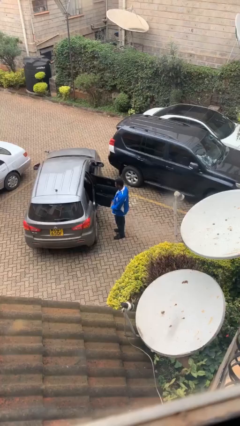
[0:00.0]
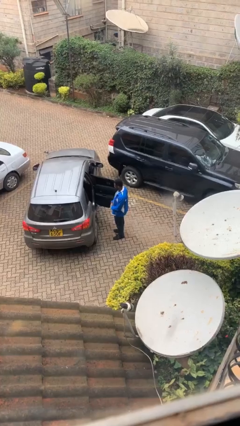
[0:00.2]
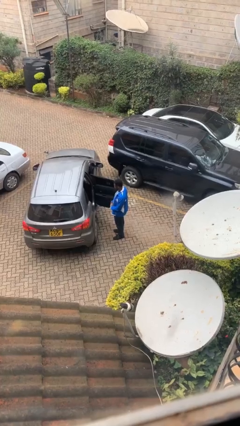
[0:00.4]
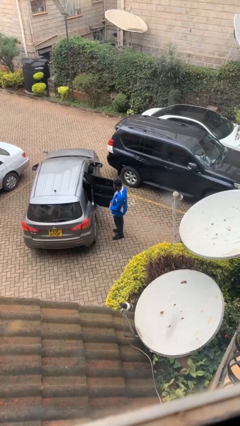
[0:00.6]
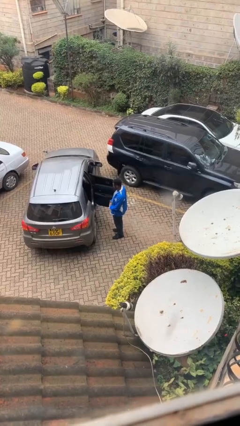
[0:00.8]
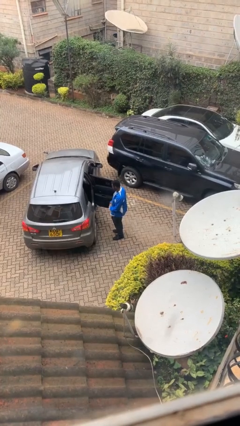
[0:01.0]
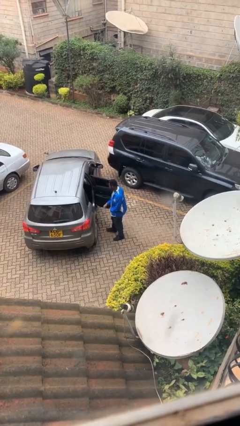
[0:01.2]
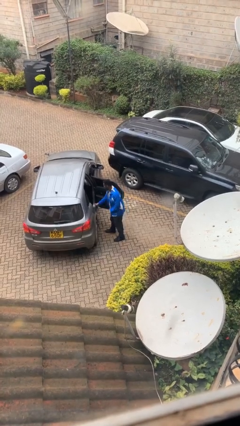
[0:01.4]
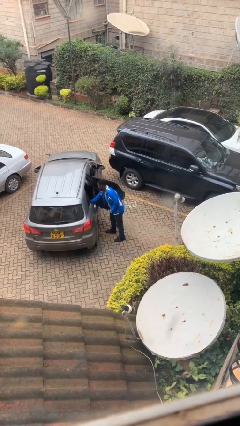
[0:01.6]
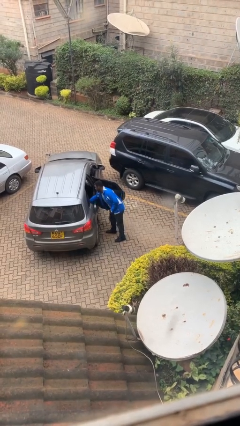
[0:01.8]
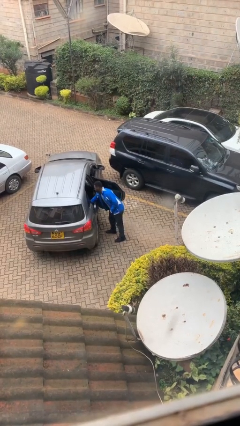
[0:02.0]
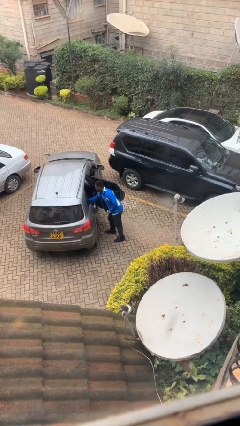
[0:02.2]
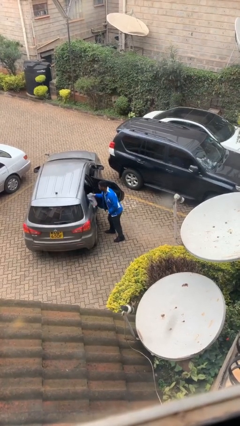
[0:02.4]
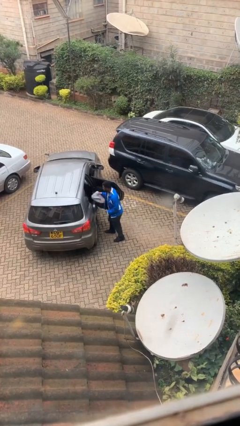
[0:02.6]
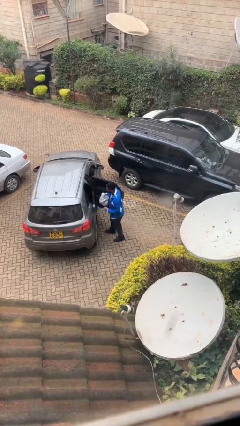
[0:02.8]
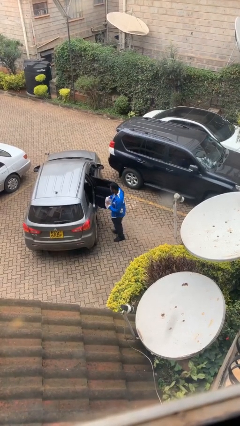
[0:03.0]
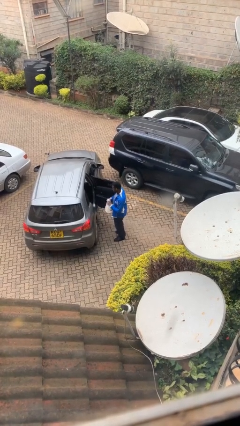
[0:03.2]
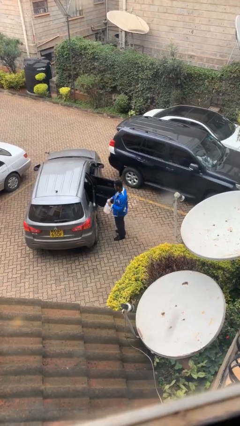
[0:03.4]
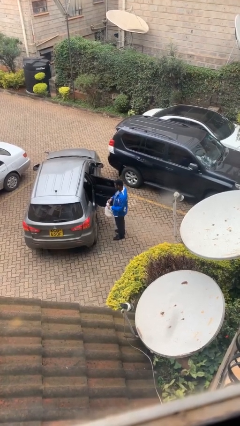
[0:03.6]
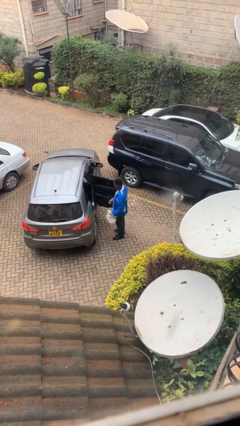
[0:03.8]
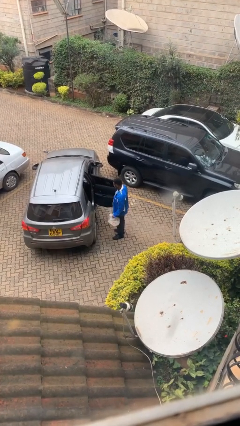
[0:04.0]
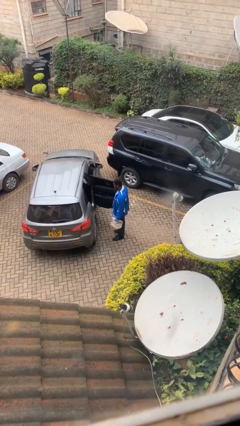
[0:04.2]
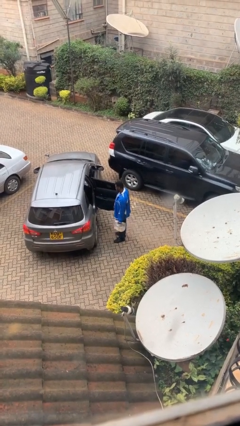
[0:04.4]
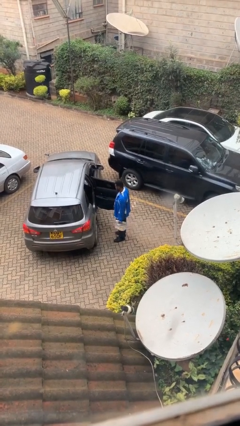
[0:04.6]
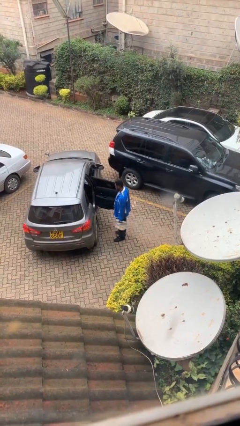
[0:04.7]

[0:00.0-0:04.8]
person unloads car

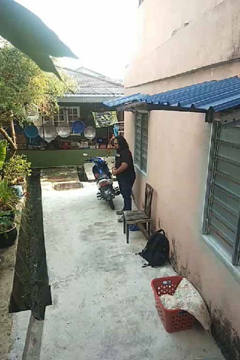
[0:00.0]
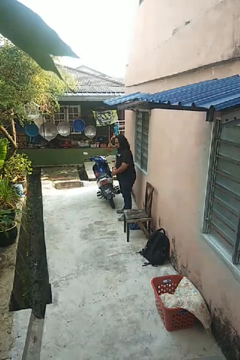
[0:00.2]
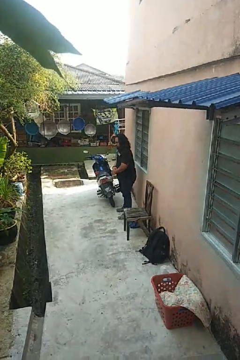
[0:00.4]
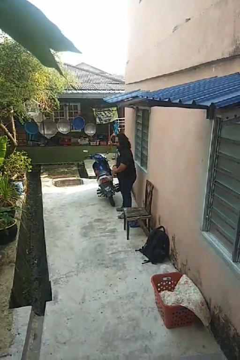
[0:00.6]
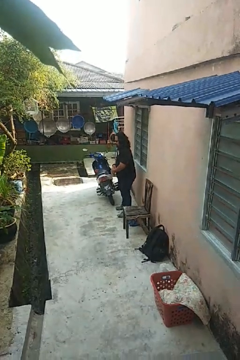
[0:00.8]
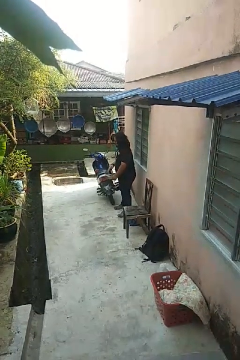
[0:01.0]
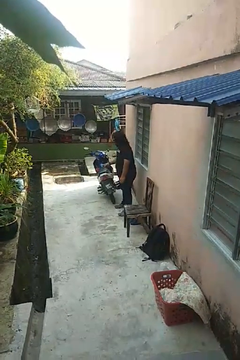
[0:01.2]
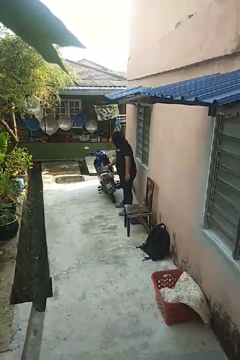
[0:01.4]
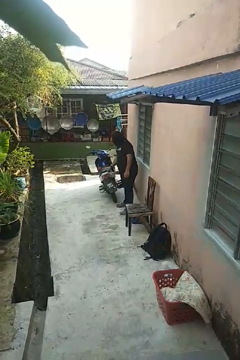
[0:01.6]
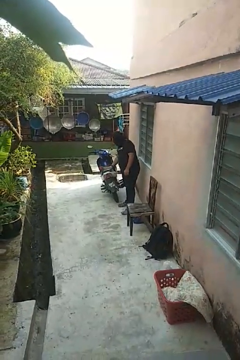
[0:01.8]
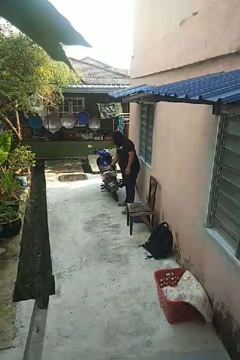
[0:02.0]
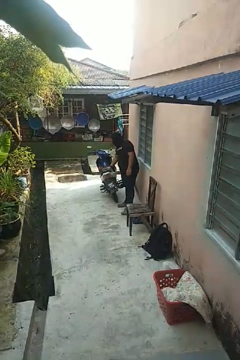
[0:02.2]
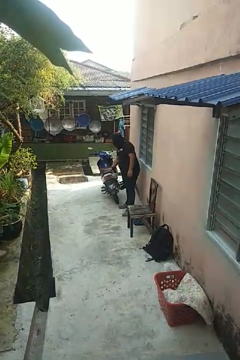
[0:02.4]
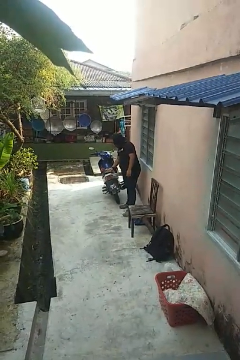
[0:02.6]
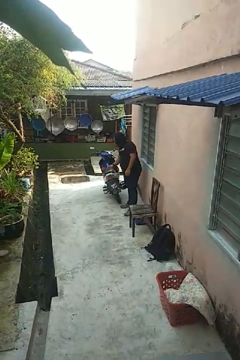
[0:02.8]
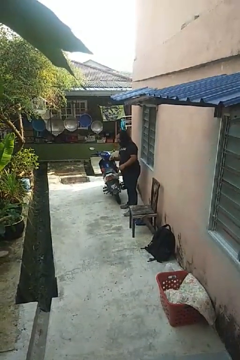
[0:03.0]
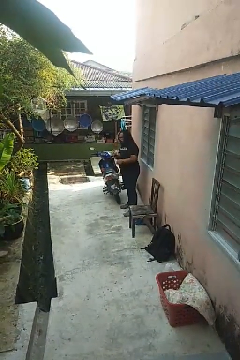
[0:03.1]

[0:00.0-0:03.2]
person taps object with finger

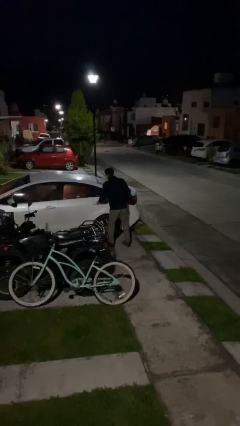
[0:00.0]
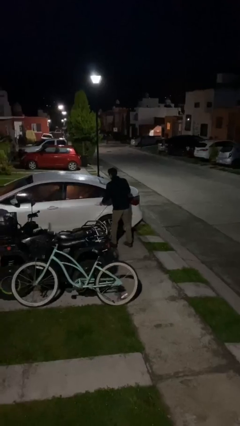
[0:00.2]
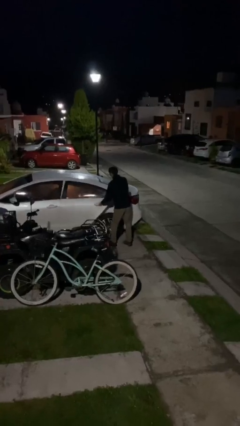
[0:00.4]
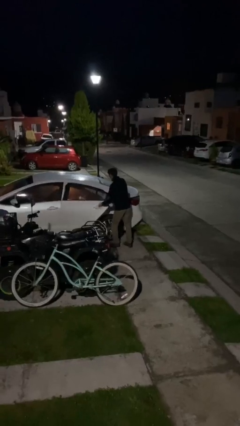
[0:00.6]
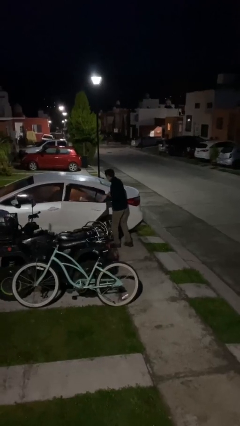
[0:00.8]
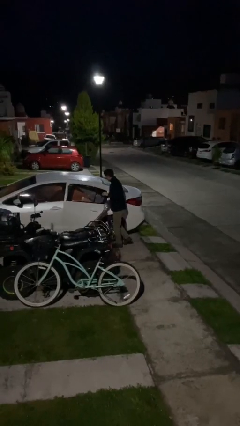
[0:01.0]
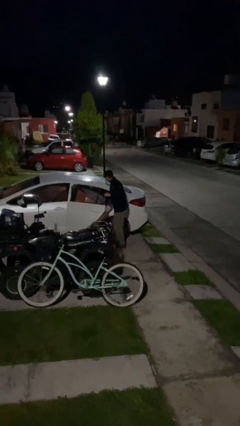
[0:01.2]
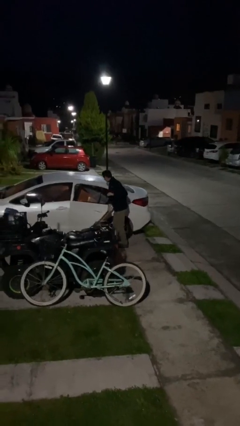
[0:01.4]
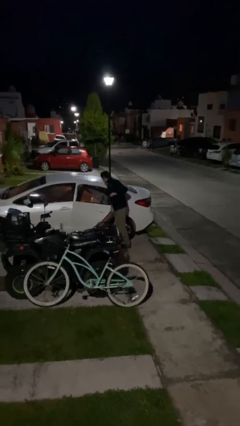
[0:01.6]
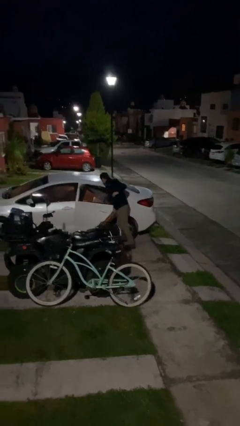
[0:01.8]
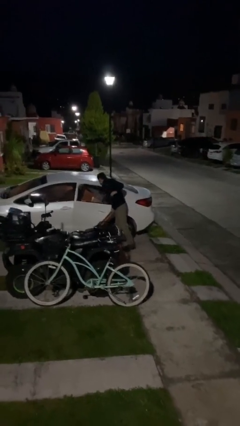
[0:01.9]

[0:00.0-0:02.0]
person opens car door

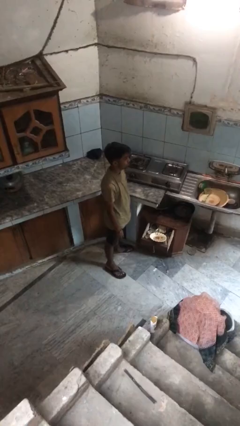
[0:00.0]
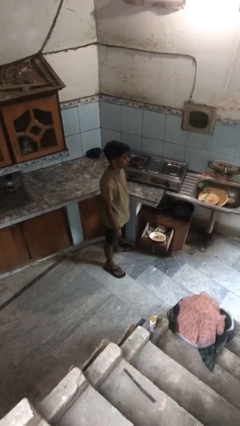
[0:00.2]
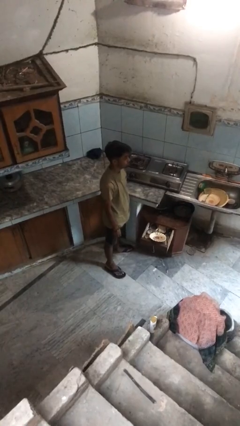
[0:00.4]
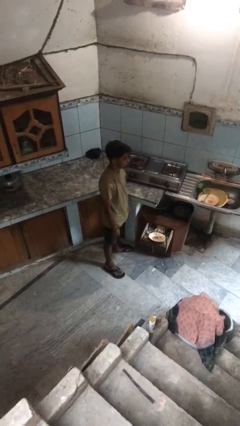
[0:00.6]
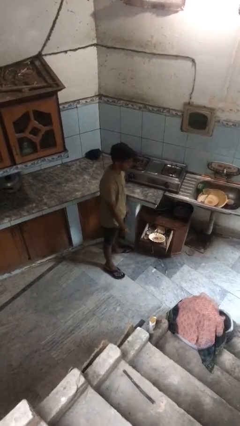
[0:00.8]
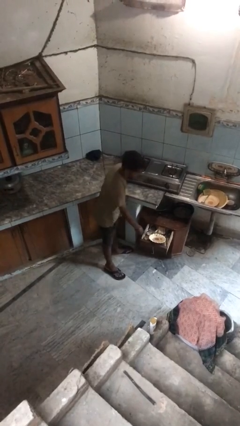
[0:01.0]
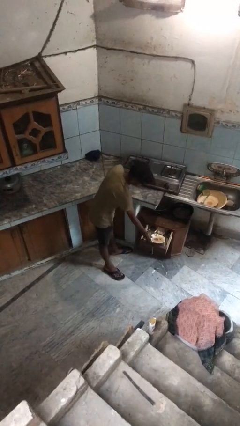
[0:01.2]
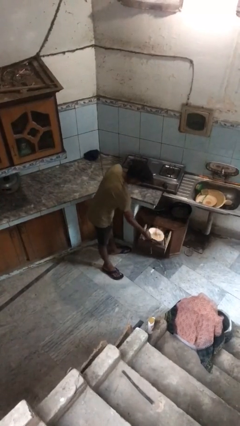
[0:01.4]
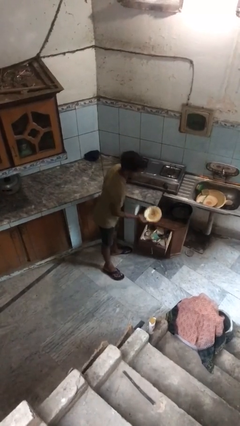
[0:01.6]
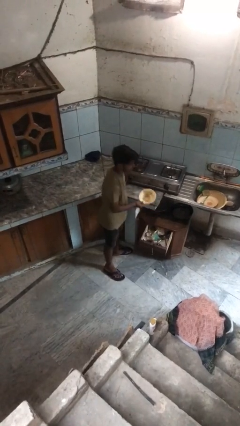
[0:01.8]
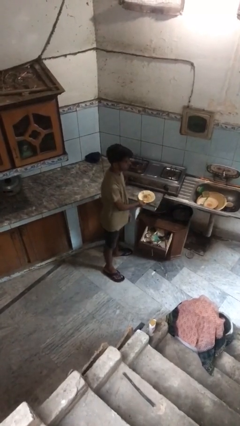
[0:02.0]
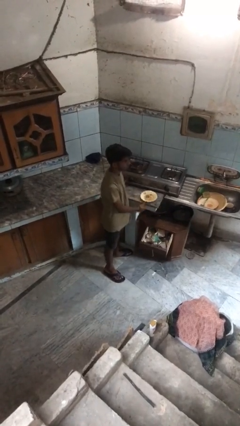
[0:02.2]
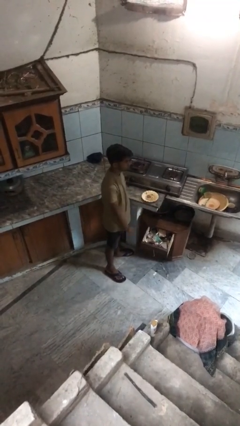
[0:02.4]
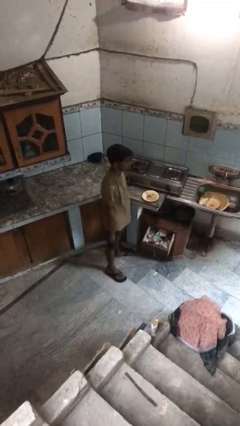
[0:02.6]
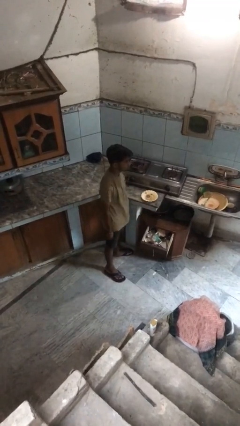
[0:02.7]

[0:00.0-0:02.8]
person takes object from kitchen drawer

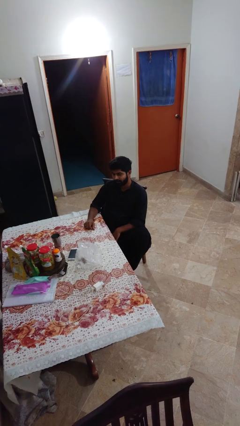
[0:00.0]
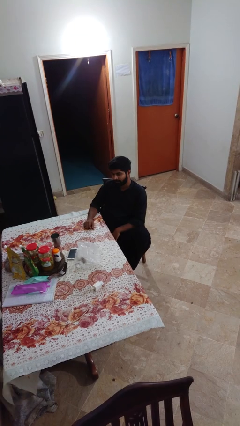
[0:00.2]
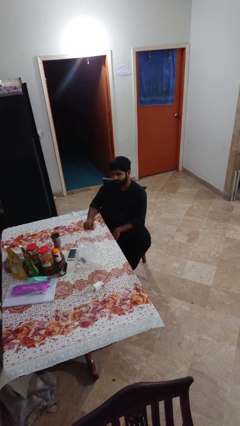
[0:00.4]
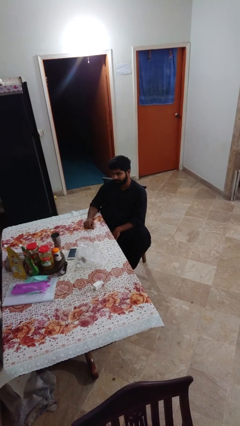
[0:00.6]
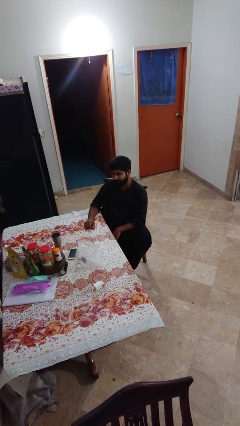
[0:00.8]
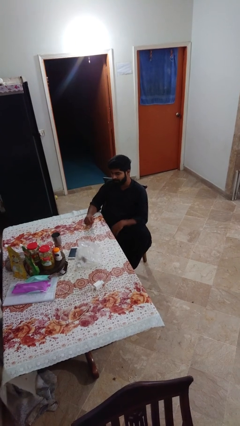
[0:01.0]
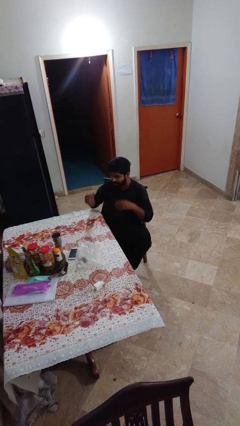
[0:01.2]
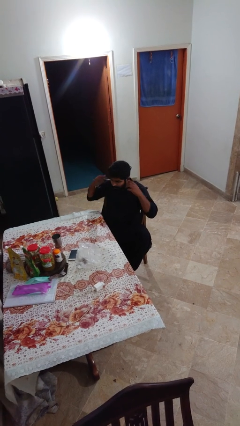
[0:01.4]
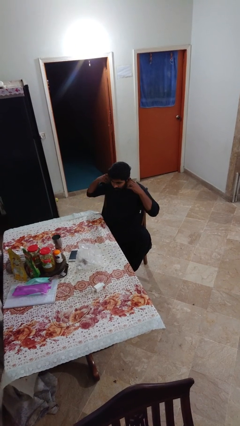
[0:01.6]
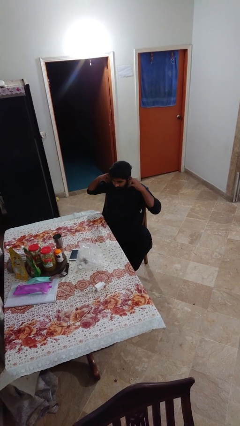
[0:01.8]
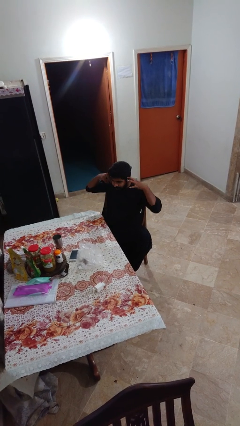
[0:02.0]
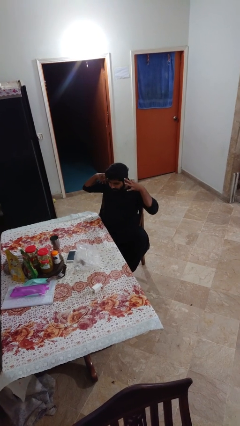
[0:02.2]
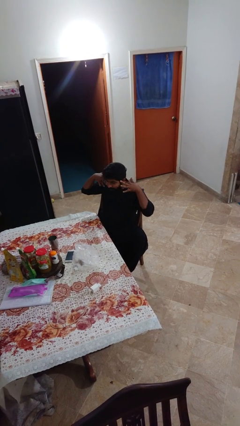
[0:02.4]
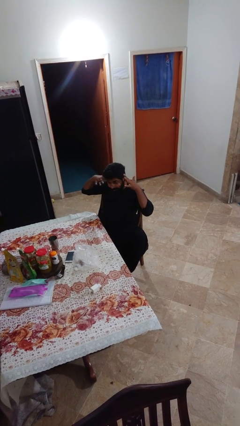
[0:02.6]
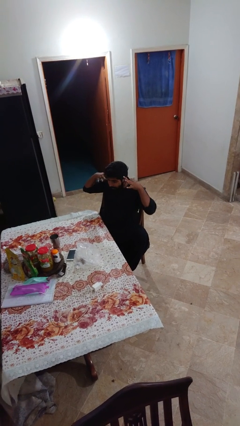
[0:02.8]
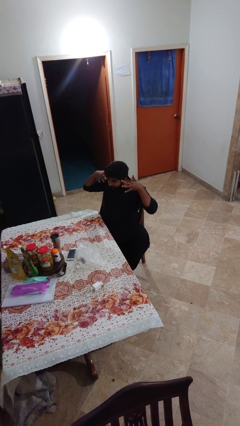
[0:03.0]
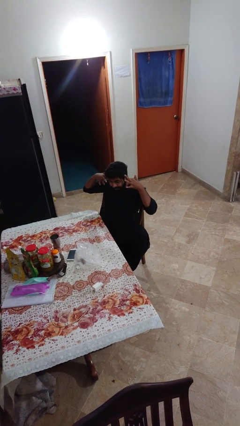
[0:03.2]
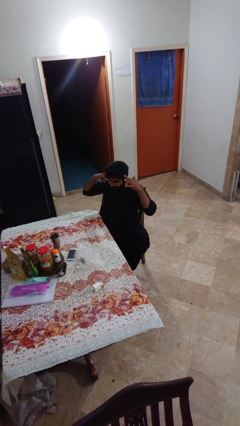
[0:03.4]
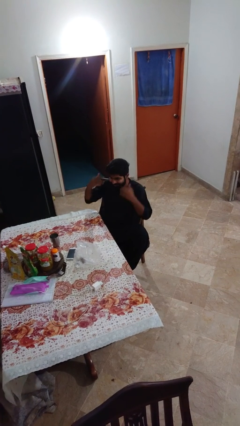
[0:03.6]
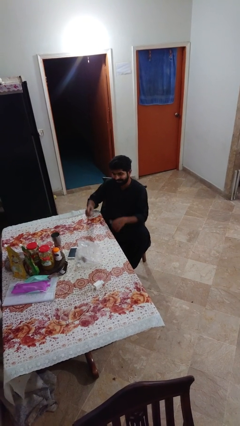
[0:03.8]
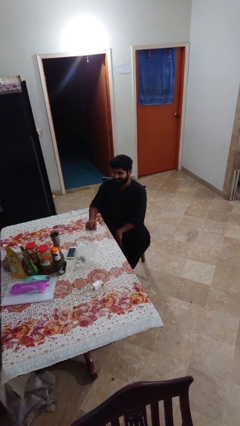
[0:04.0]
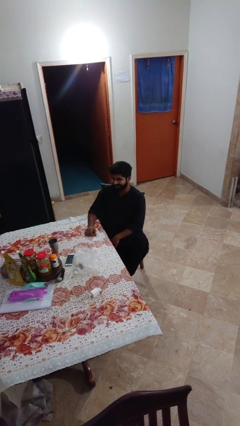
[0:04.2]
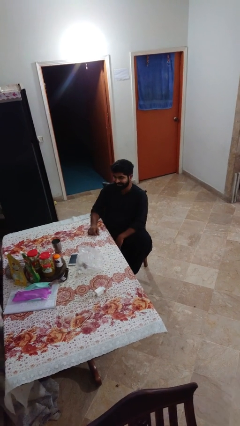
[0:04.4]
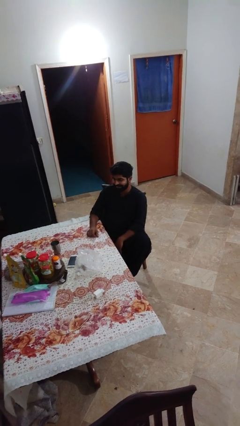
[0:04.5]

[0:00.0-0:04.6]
person puts fingers in ear

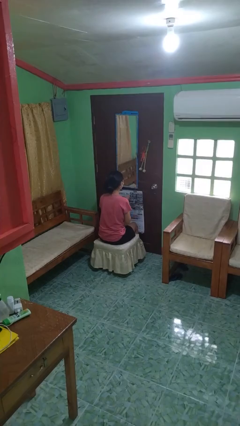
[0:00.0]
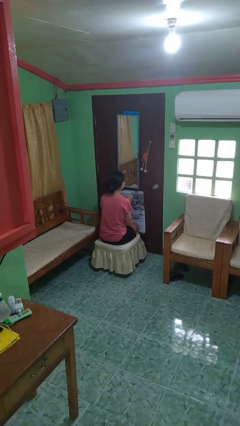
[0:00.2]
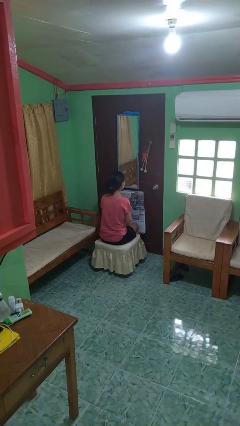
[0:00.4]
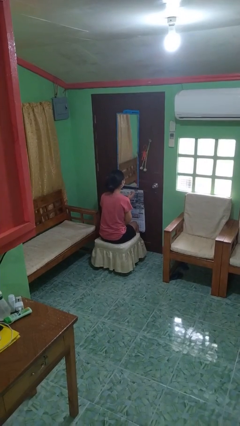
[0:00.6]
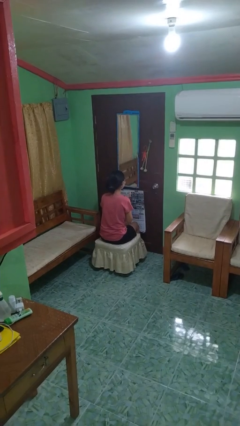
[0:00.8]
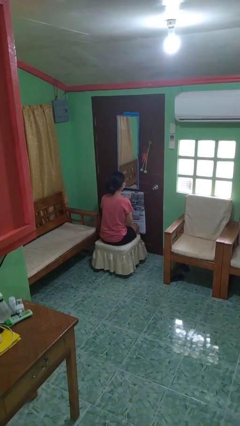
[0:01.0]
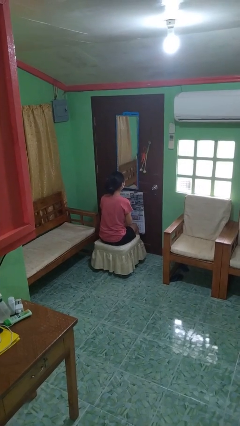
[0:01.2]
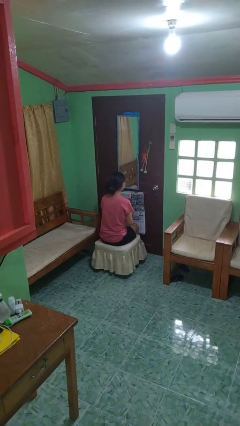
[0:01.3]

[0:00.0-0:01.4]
person claps hands
